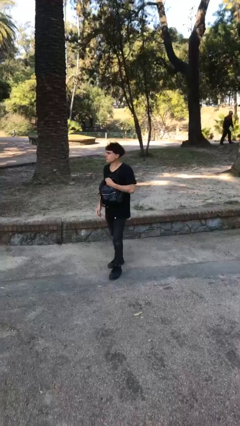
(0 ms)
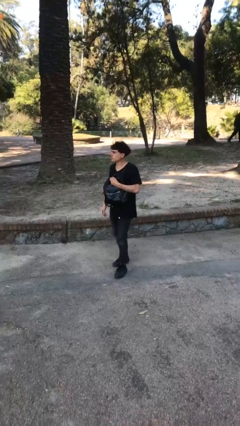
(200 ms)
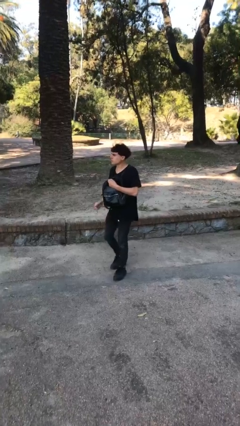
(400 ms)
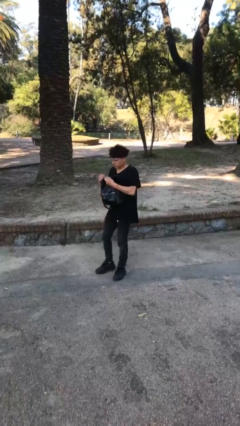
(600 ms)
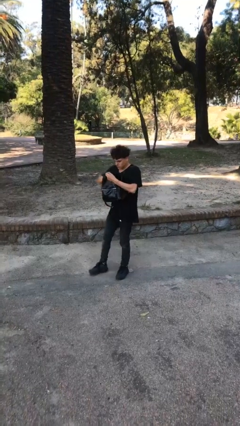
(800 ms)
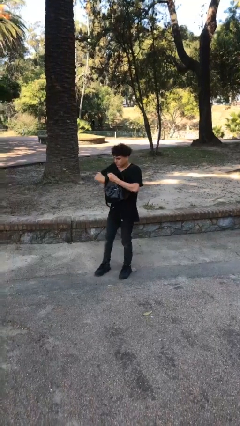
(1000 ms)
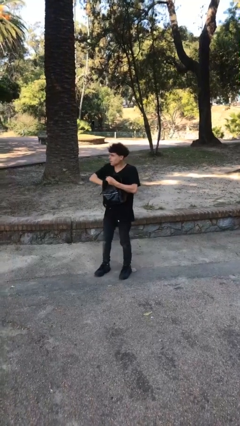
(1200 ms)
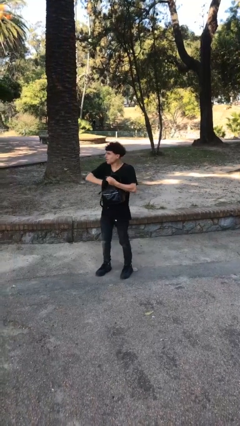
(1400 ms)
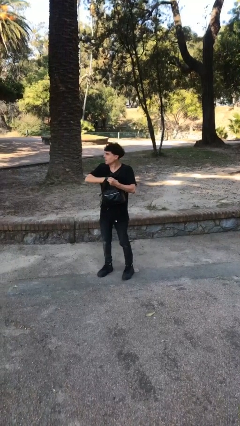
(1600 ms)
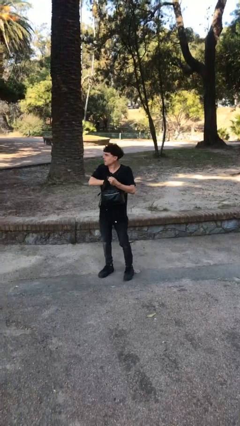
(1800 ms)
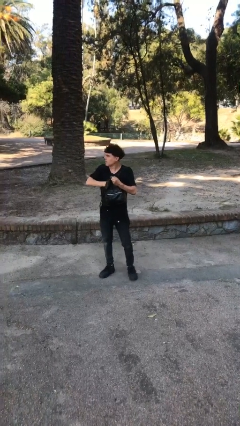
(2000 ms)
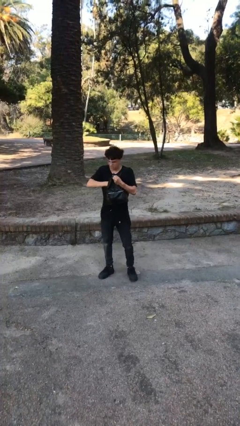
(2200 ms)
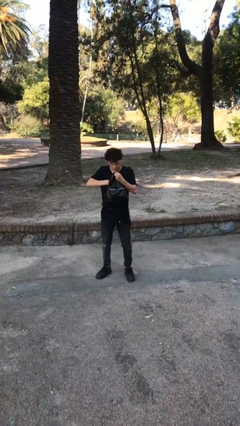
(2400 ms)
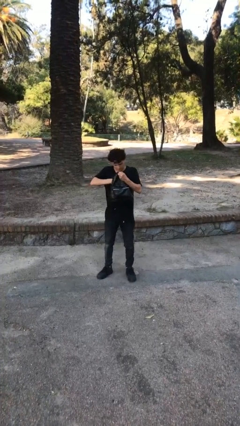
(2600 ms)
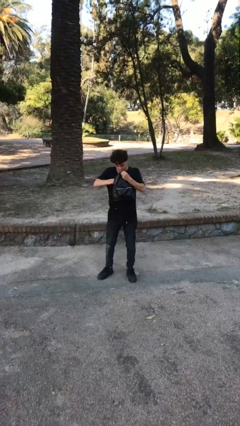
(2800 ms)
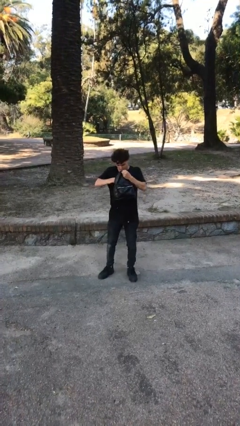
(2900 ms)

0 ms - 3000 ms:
person searches in purse

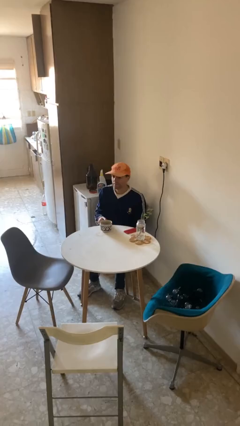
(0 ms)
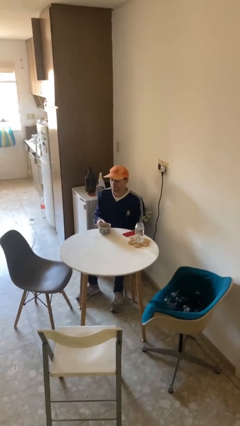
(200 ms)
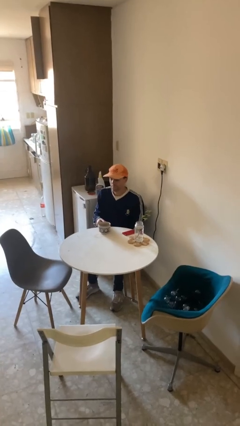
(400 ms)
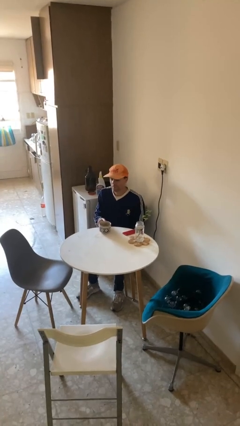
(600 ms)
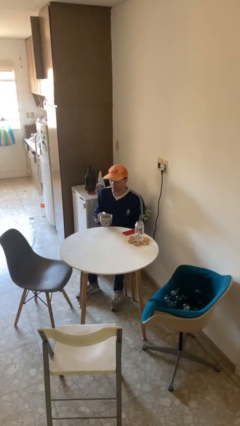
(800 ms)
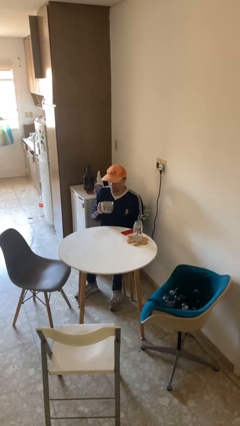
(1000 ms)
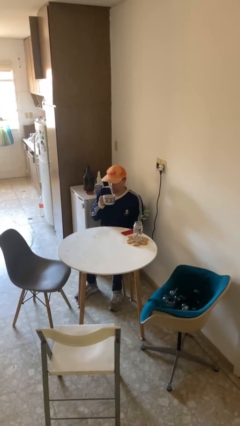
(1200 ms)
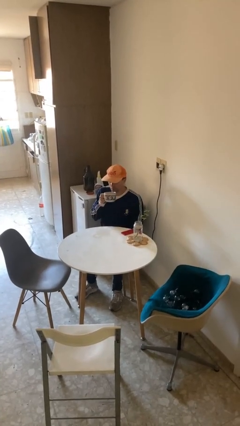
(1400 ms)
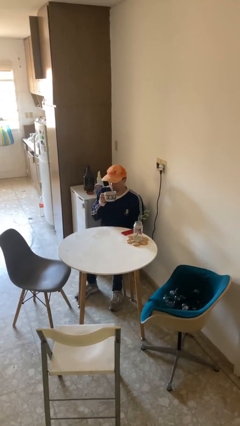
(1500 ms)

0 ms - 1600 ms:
person picks up object from table

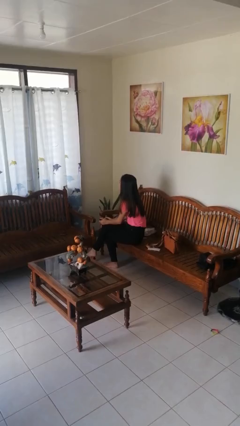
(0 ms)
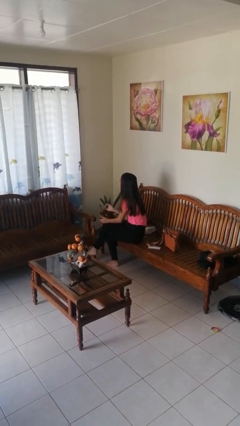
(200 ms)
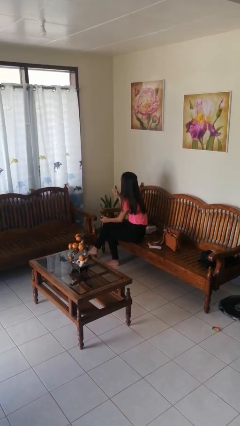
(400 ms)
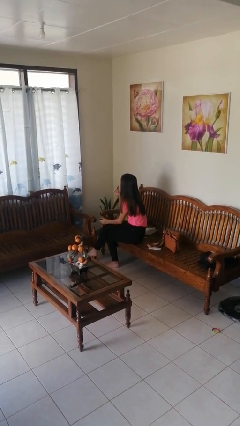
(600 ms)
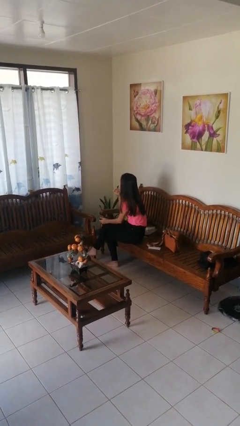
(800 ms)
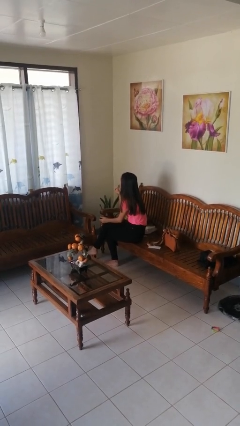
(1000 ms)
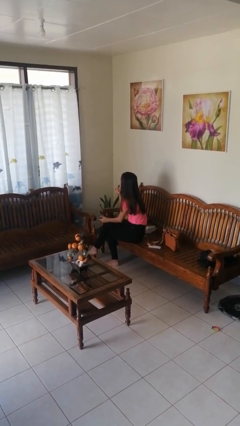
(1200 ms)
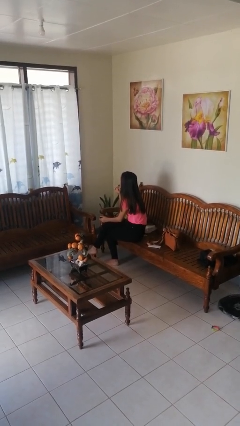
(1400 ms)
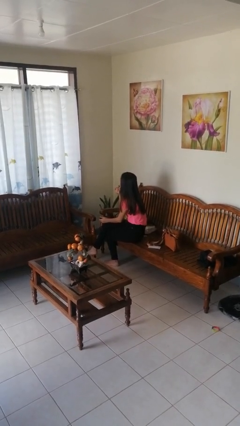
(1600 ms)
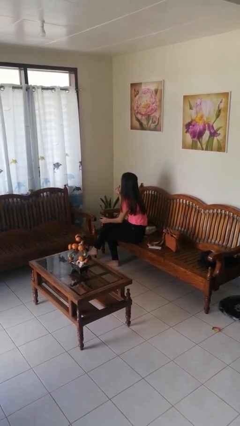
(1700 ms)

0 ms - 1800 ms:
person applies lip makeup

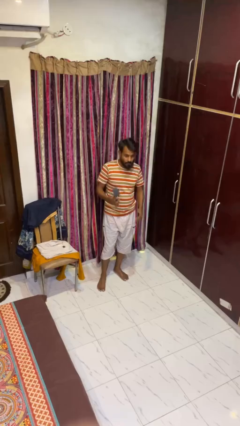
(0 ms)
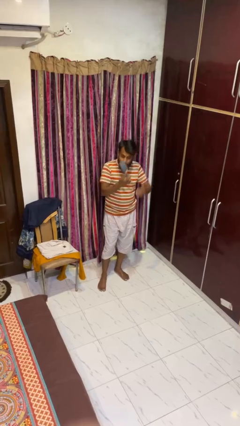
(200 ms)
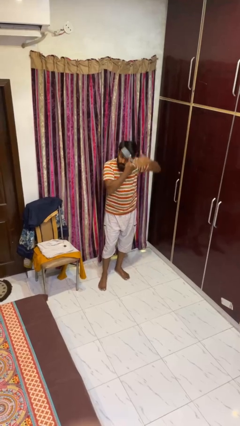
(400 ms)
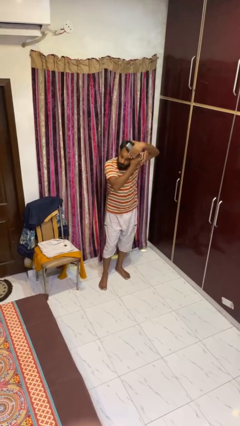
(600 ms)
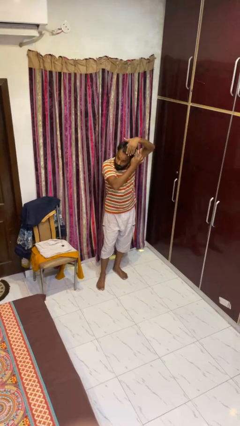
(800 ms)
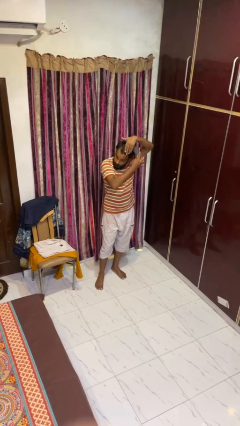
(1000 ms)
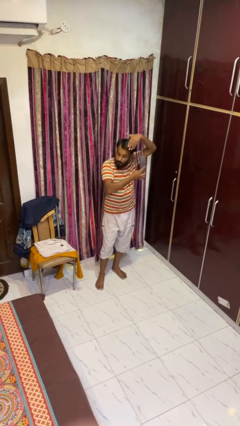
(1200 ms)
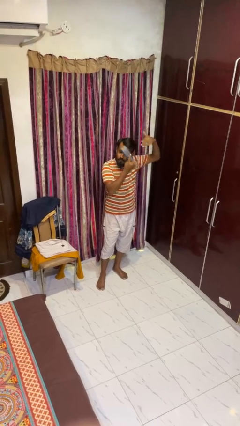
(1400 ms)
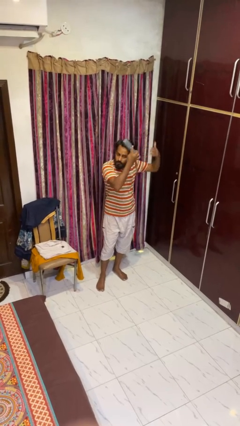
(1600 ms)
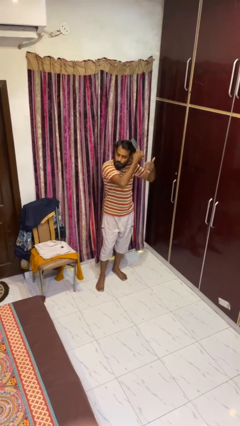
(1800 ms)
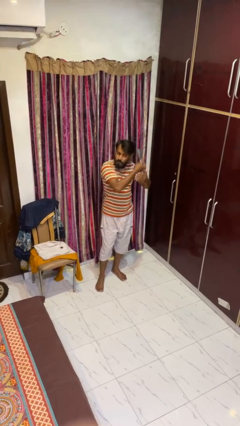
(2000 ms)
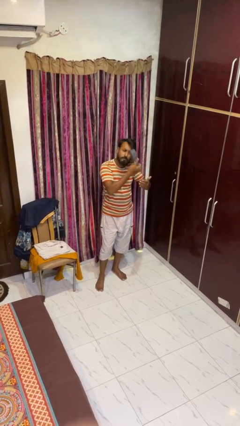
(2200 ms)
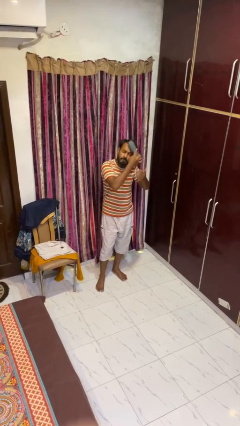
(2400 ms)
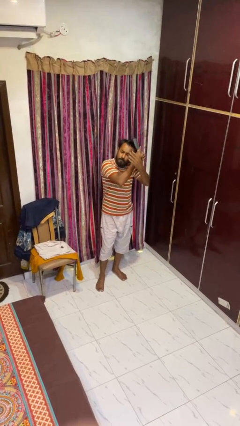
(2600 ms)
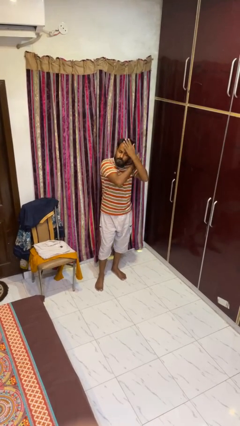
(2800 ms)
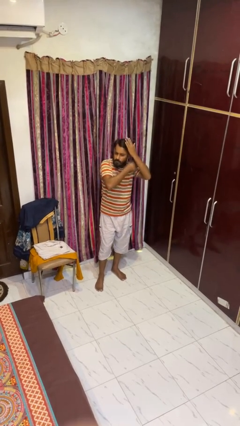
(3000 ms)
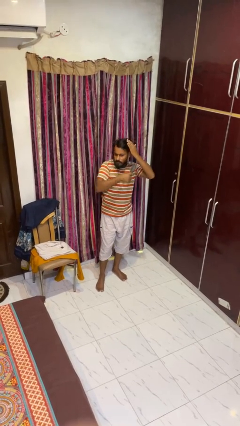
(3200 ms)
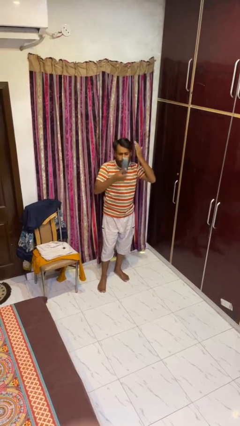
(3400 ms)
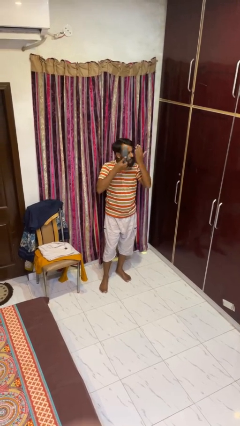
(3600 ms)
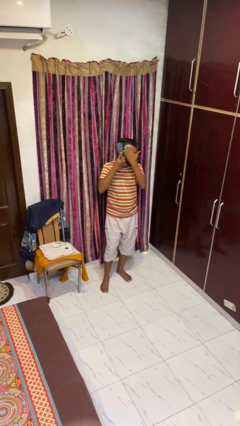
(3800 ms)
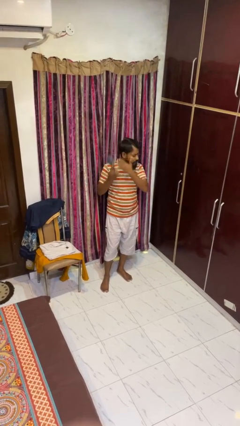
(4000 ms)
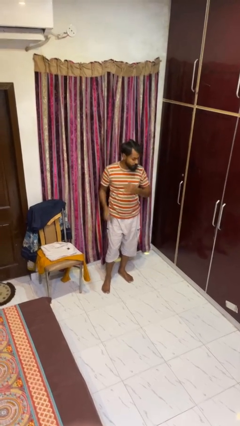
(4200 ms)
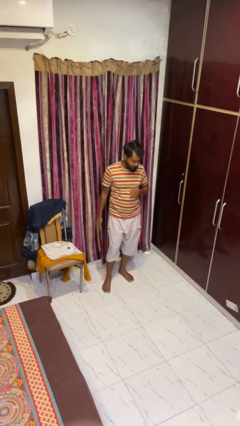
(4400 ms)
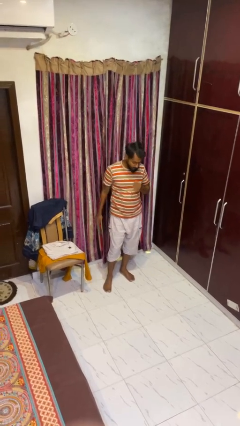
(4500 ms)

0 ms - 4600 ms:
person brushes hair

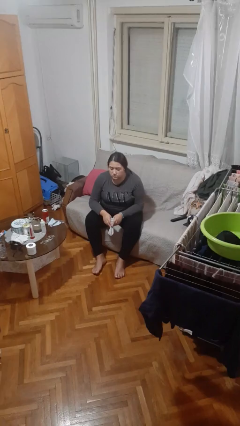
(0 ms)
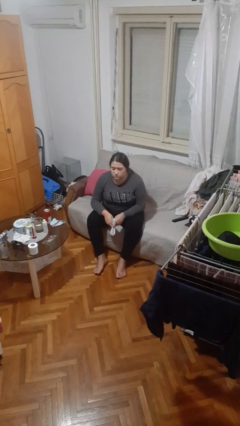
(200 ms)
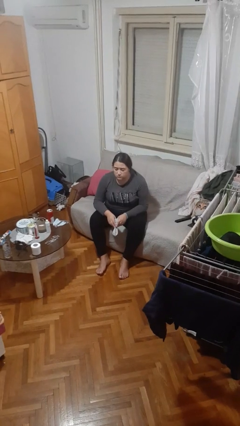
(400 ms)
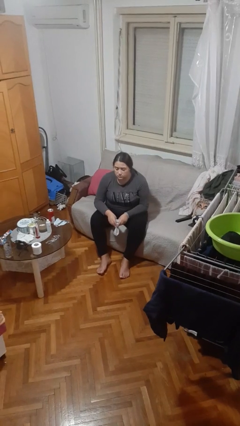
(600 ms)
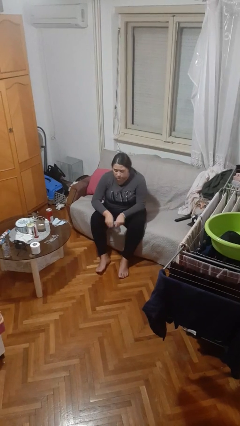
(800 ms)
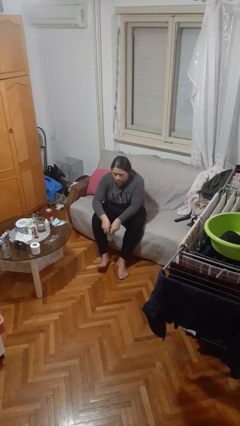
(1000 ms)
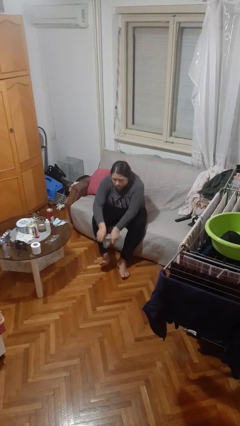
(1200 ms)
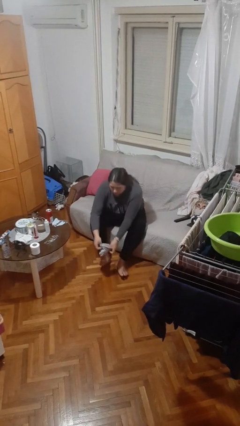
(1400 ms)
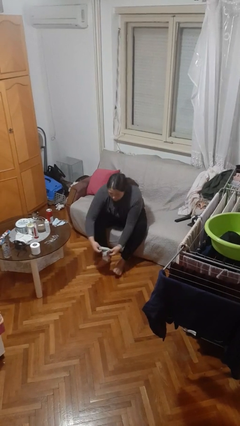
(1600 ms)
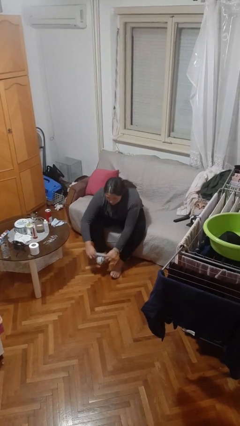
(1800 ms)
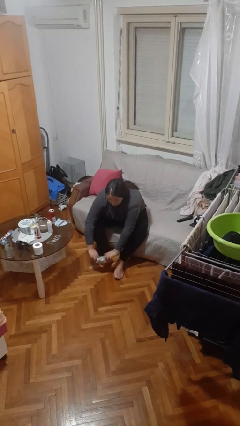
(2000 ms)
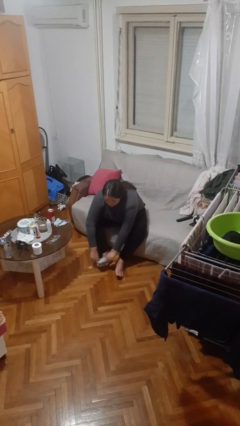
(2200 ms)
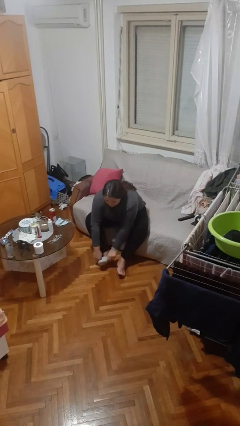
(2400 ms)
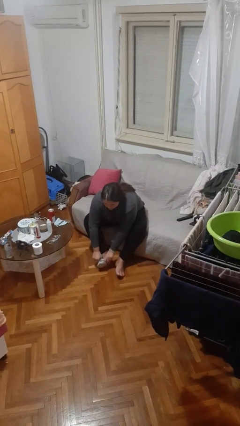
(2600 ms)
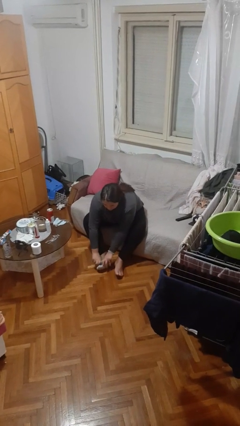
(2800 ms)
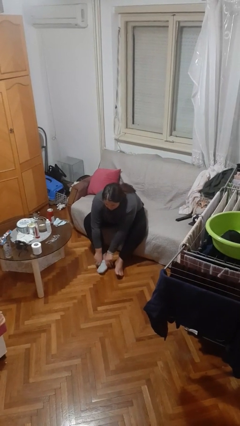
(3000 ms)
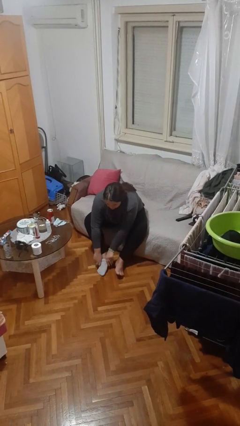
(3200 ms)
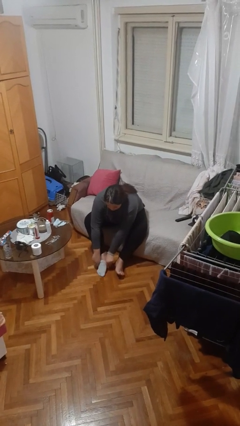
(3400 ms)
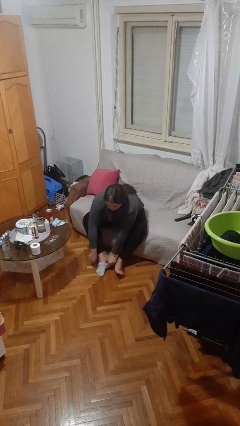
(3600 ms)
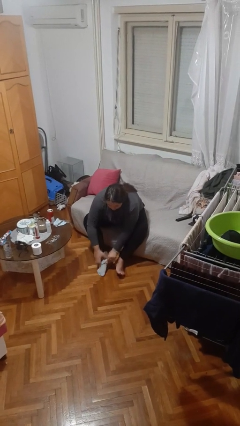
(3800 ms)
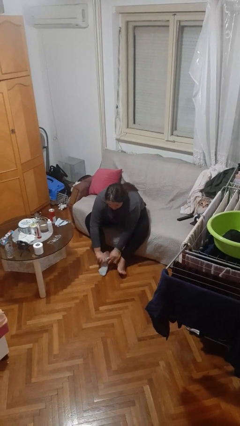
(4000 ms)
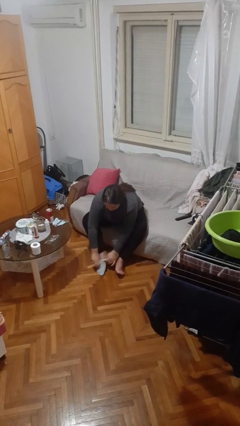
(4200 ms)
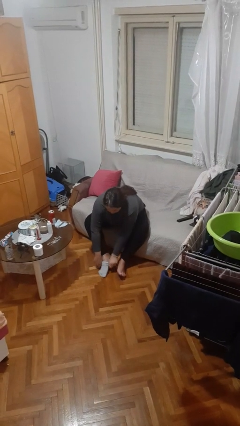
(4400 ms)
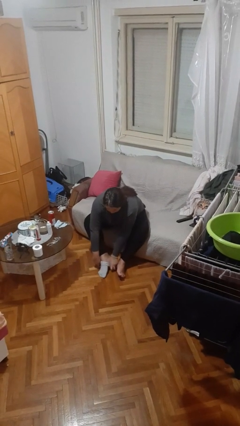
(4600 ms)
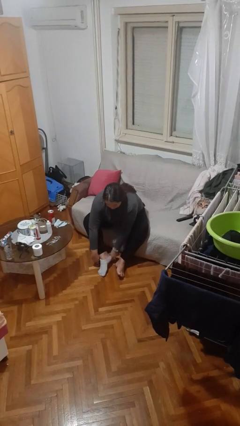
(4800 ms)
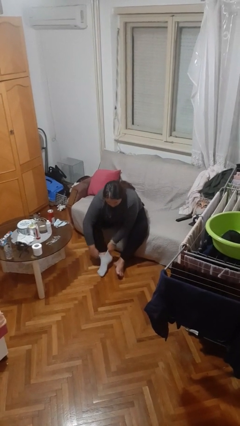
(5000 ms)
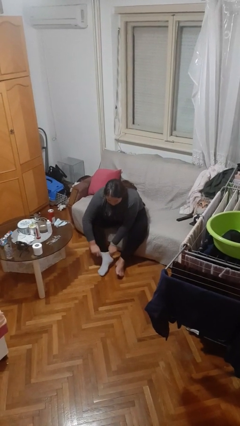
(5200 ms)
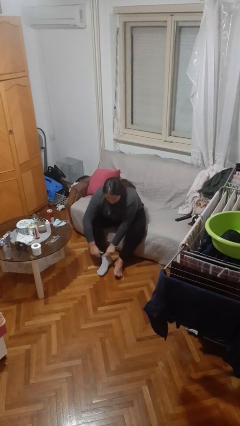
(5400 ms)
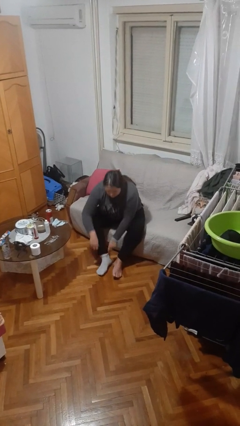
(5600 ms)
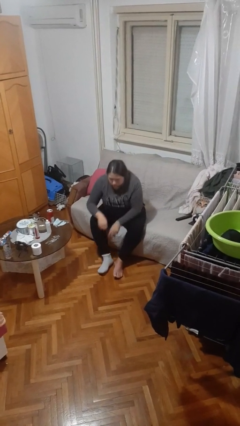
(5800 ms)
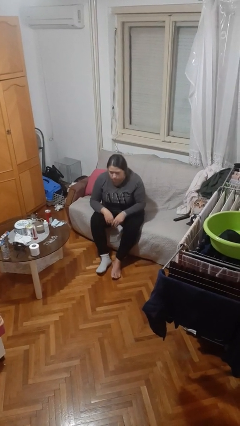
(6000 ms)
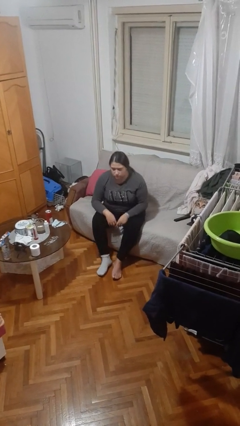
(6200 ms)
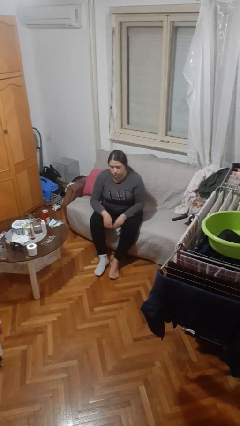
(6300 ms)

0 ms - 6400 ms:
person puts on socks
